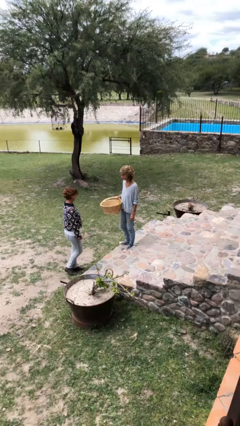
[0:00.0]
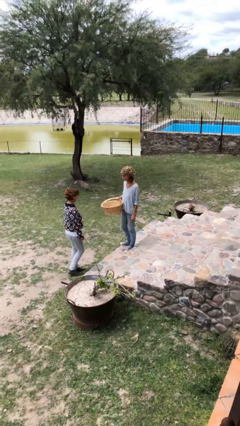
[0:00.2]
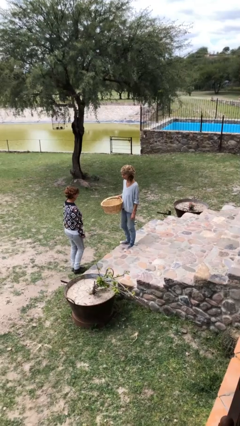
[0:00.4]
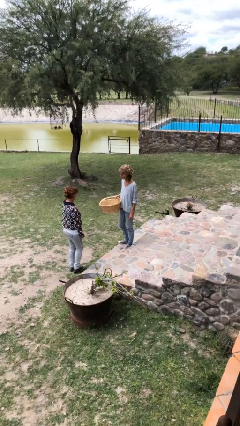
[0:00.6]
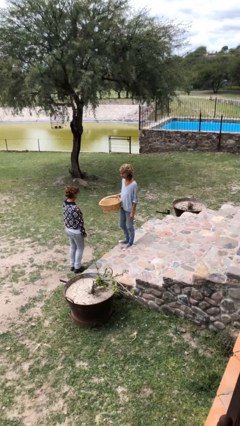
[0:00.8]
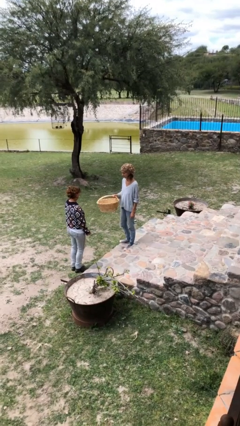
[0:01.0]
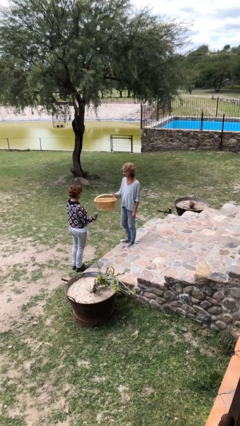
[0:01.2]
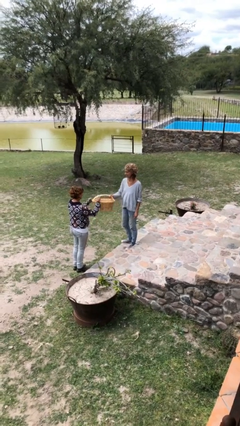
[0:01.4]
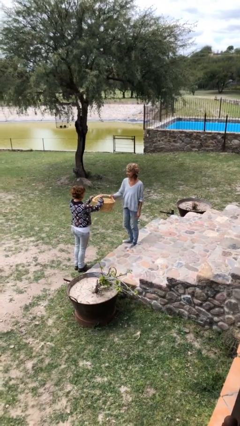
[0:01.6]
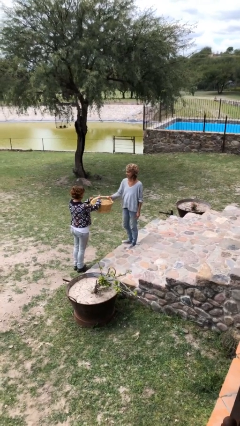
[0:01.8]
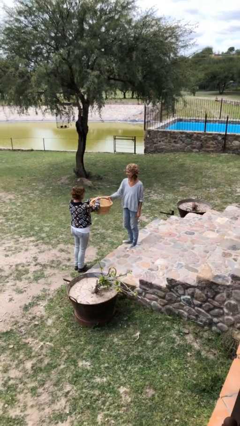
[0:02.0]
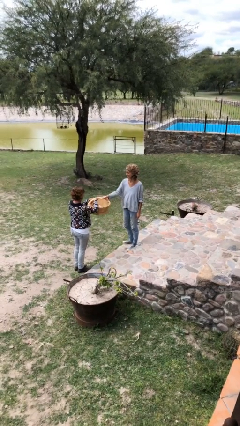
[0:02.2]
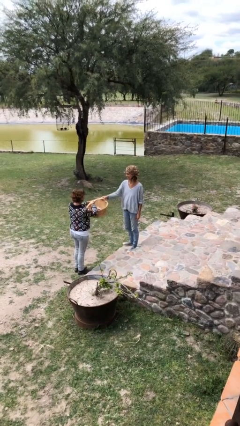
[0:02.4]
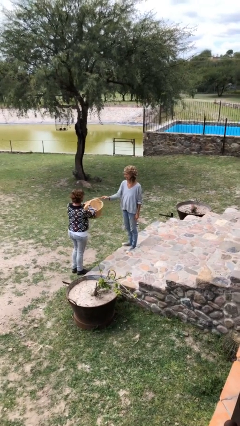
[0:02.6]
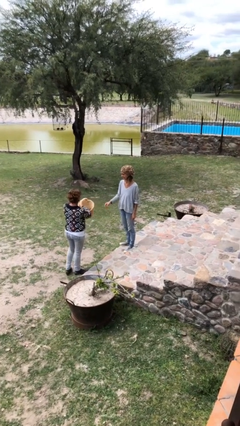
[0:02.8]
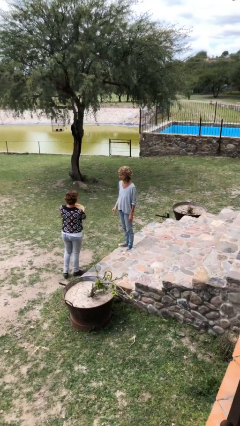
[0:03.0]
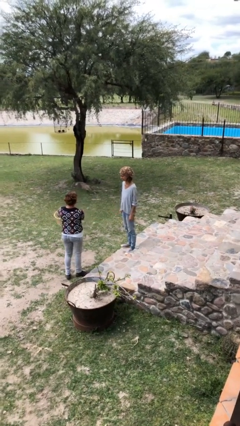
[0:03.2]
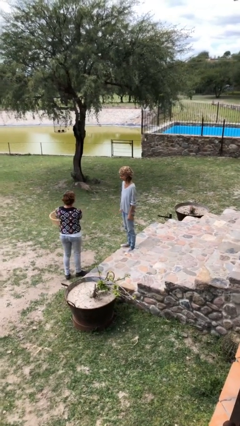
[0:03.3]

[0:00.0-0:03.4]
person transfers object to person

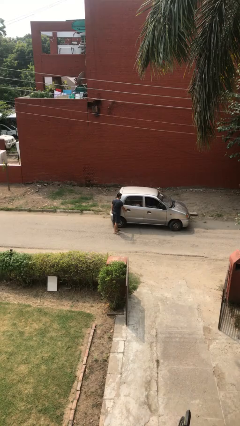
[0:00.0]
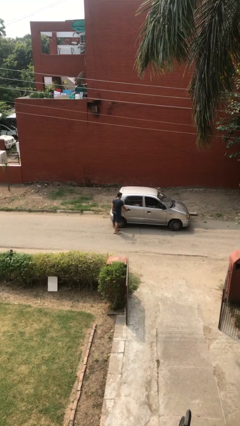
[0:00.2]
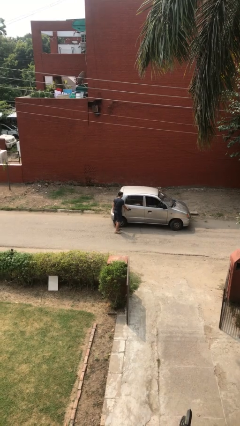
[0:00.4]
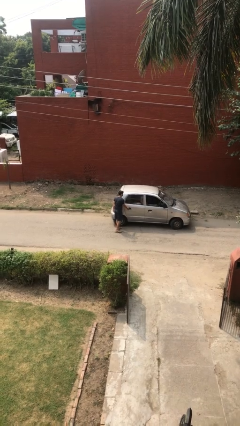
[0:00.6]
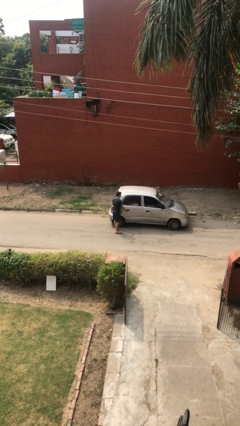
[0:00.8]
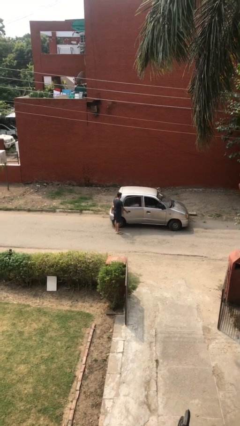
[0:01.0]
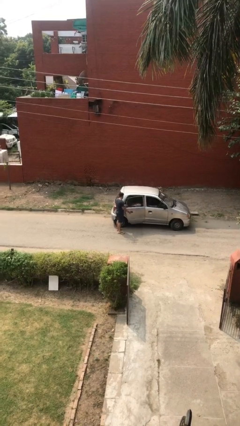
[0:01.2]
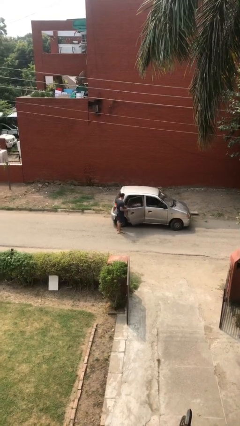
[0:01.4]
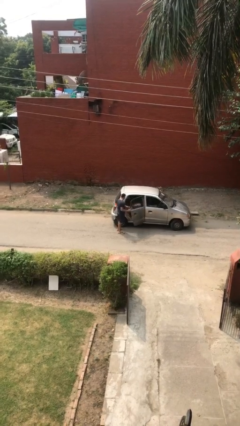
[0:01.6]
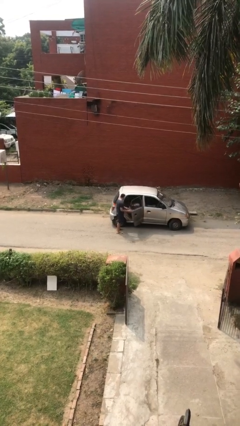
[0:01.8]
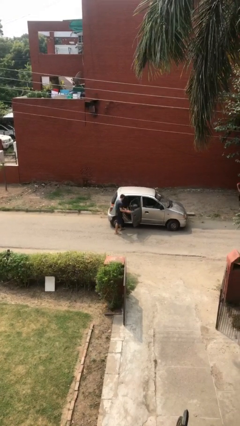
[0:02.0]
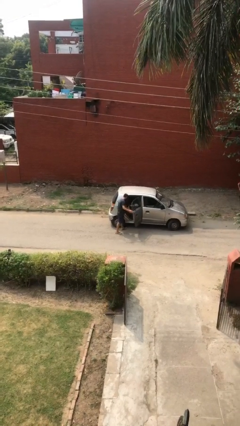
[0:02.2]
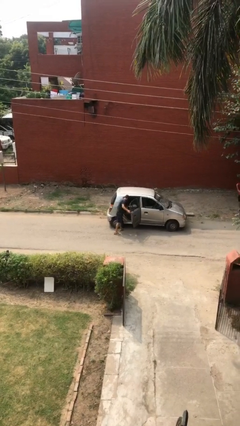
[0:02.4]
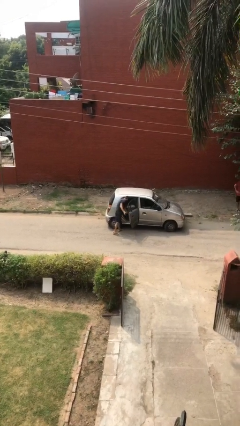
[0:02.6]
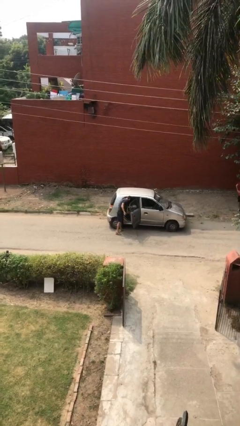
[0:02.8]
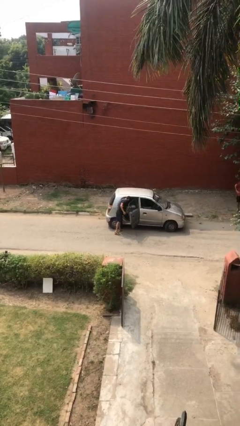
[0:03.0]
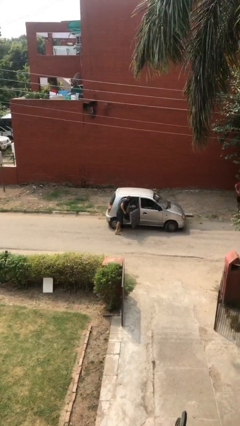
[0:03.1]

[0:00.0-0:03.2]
person opens car door

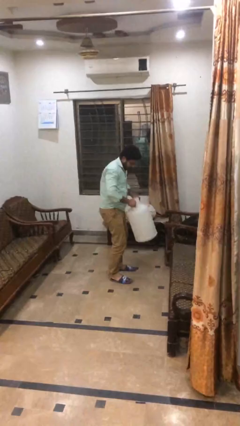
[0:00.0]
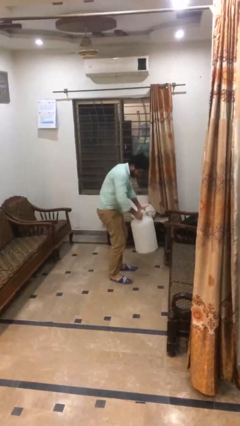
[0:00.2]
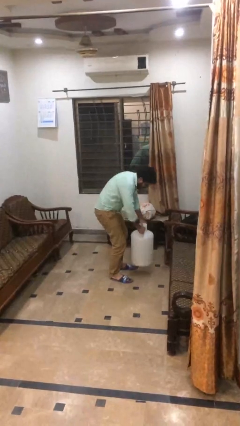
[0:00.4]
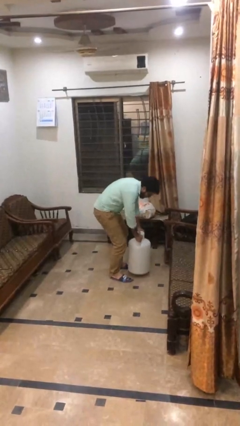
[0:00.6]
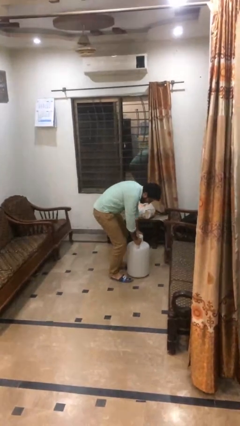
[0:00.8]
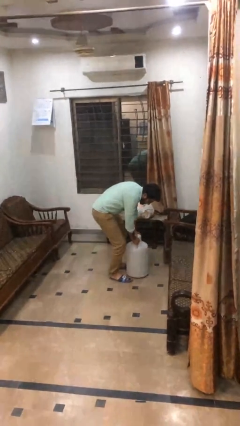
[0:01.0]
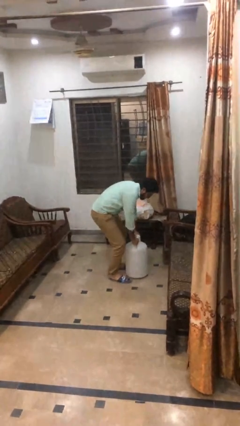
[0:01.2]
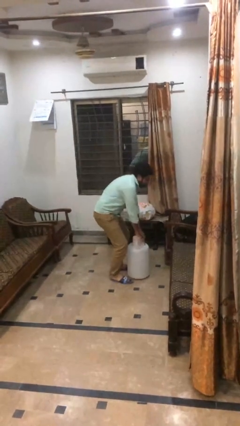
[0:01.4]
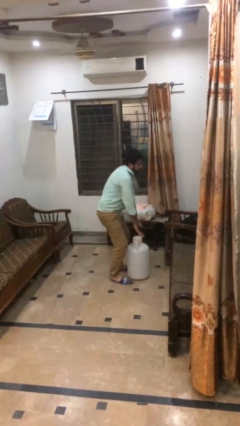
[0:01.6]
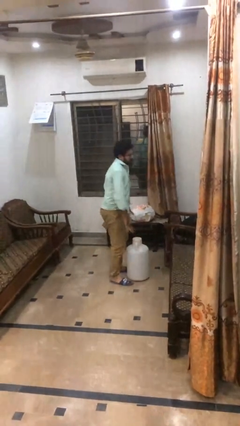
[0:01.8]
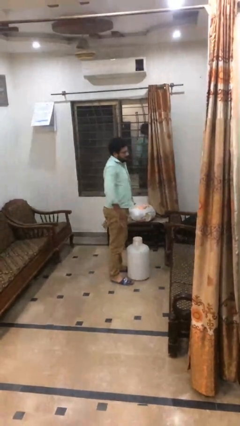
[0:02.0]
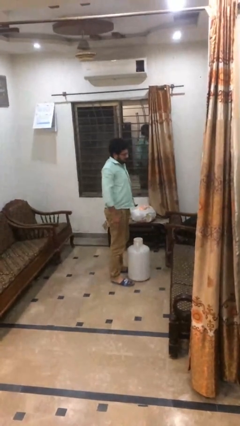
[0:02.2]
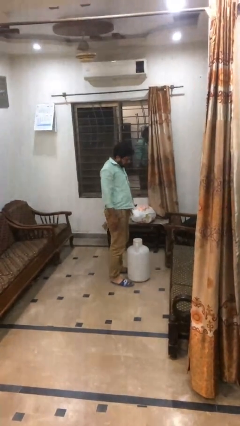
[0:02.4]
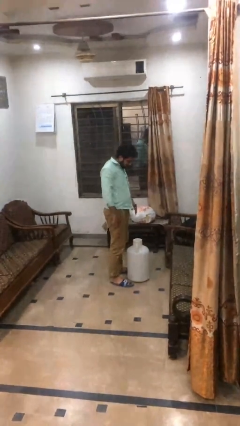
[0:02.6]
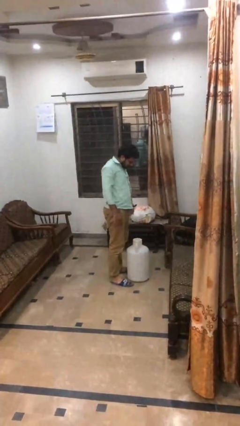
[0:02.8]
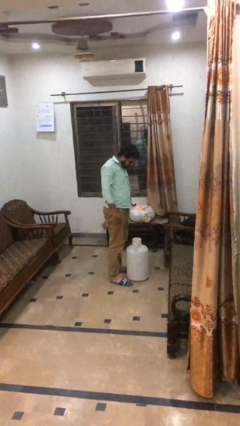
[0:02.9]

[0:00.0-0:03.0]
person puts down object on floor

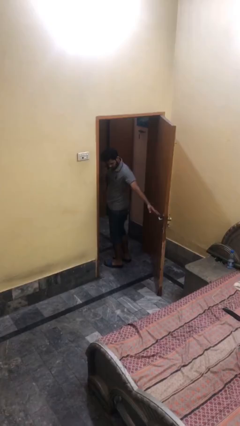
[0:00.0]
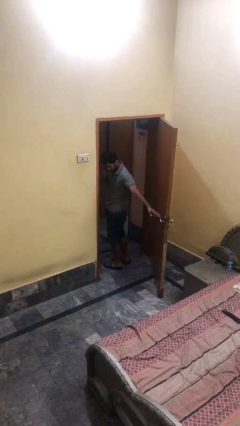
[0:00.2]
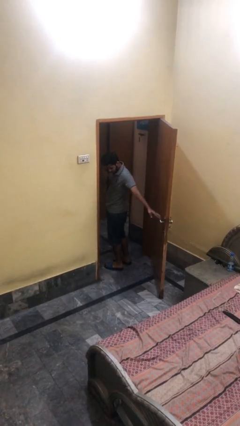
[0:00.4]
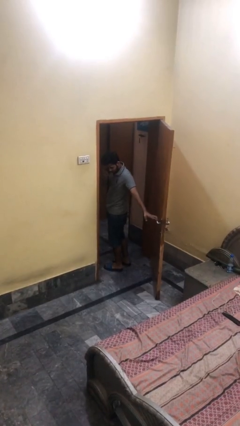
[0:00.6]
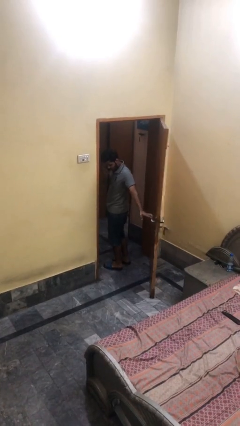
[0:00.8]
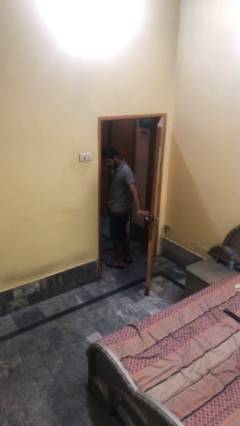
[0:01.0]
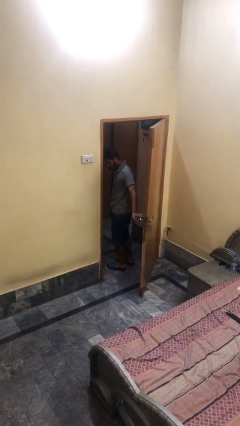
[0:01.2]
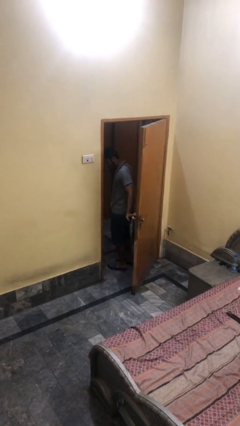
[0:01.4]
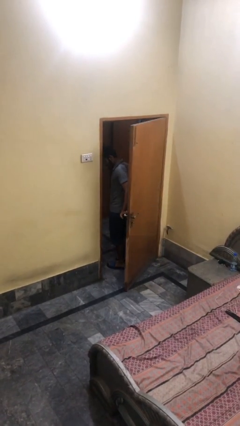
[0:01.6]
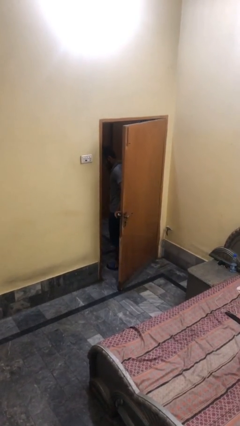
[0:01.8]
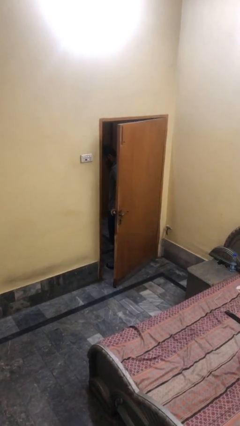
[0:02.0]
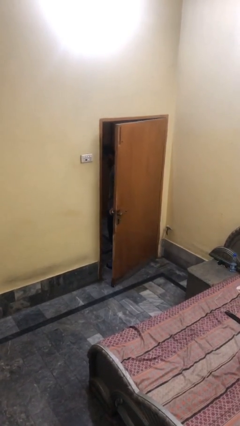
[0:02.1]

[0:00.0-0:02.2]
person closes facility door

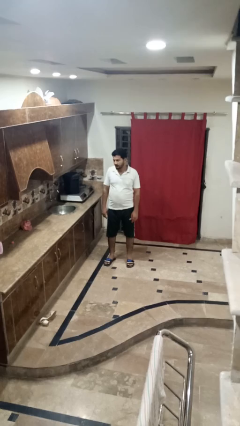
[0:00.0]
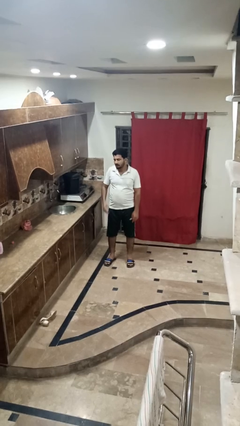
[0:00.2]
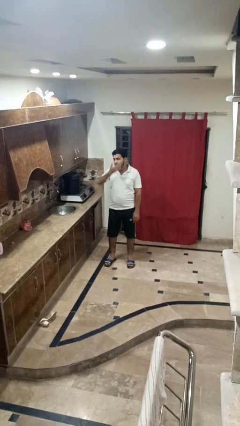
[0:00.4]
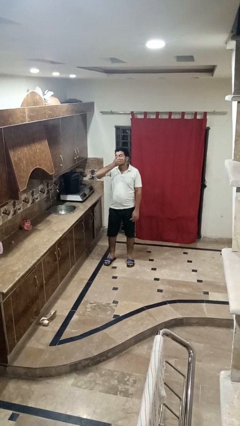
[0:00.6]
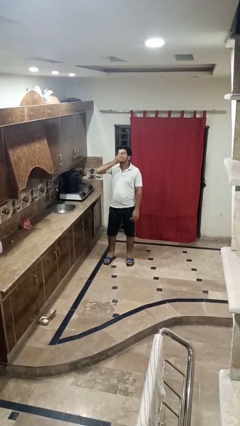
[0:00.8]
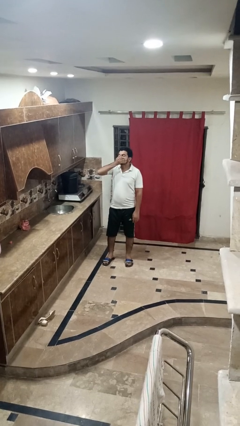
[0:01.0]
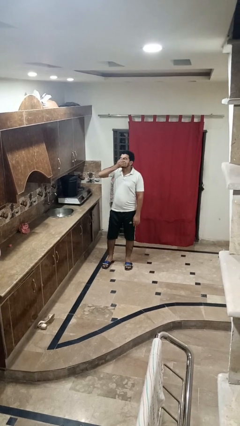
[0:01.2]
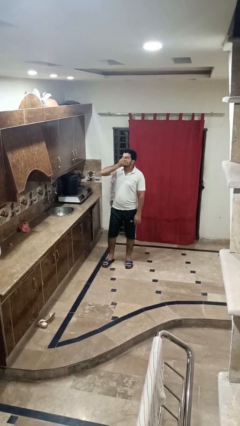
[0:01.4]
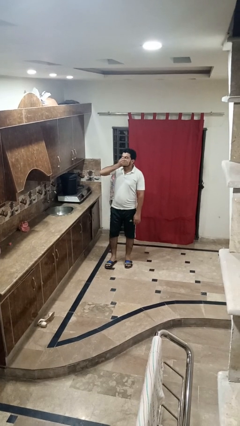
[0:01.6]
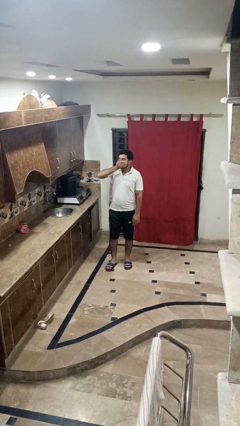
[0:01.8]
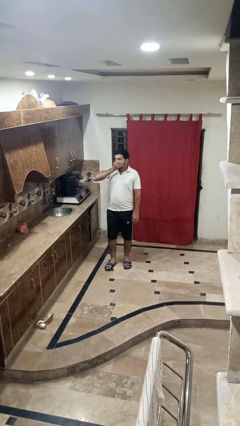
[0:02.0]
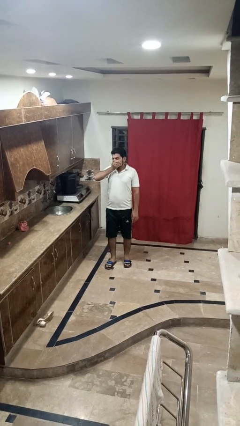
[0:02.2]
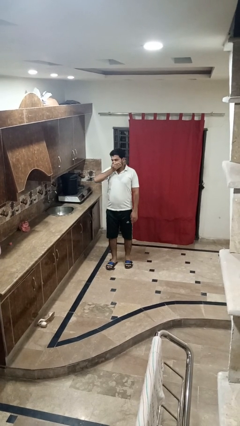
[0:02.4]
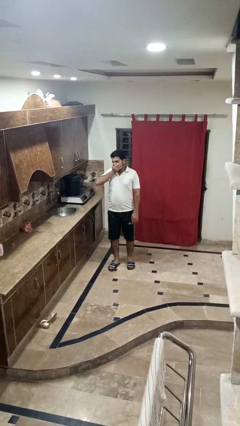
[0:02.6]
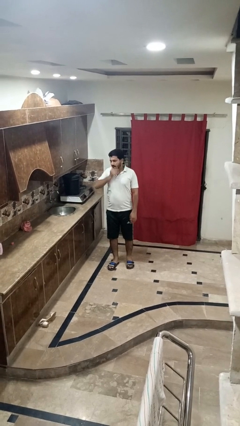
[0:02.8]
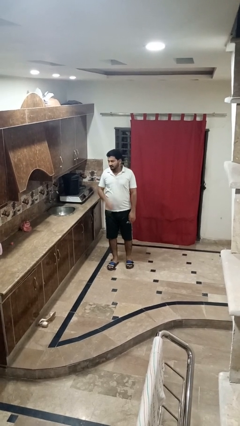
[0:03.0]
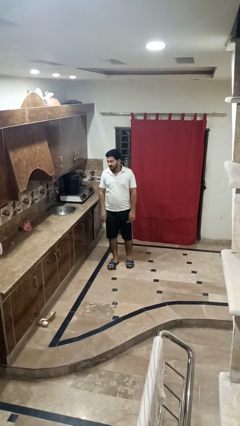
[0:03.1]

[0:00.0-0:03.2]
person sneezes into hand

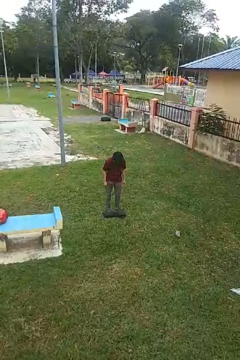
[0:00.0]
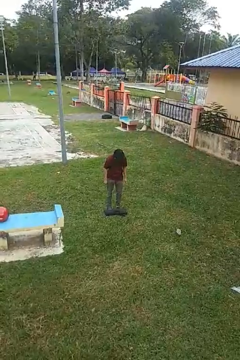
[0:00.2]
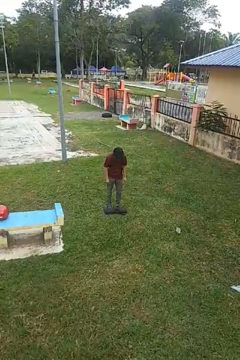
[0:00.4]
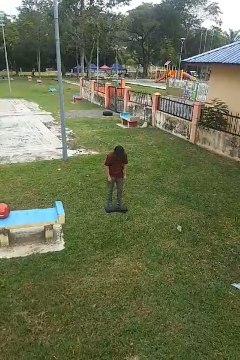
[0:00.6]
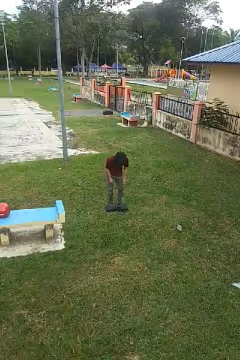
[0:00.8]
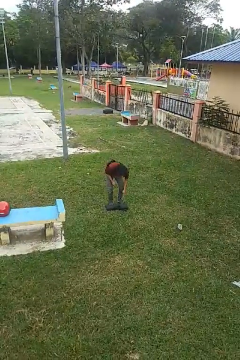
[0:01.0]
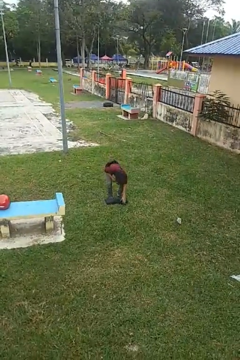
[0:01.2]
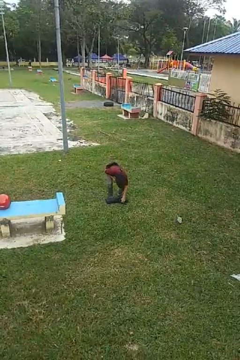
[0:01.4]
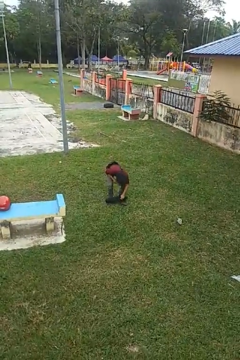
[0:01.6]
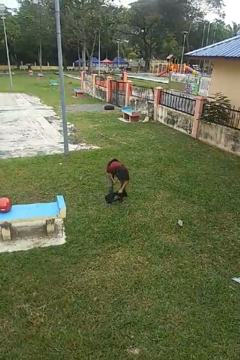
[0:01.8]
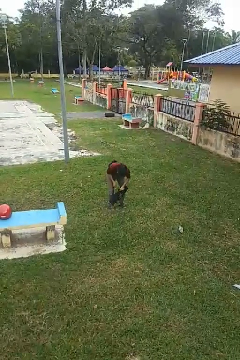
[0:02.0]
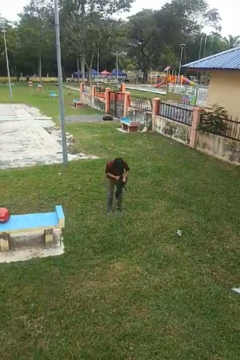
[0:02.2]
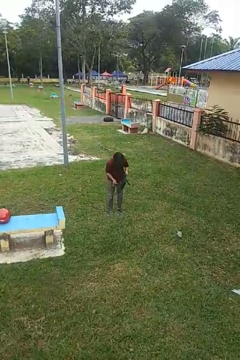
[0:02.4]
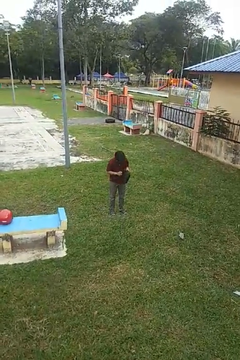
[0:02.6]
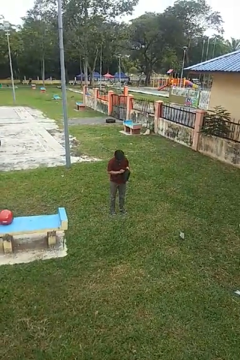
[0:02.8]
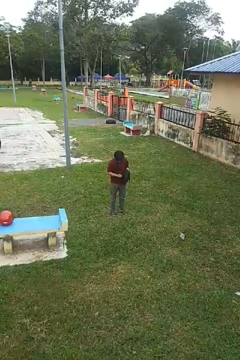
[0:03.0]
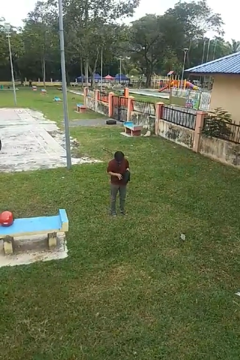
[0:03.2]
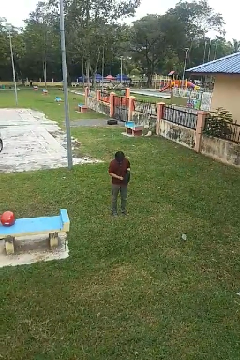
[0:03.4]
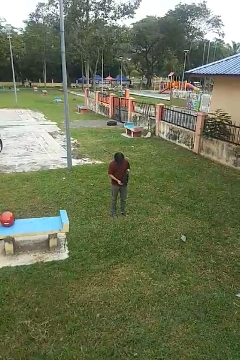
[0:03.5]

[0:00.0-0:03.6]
person picks up object from floor
